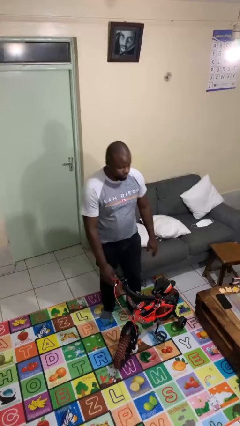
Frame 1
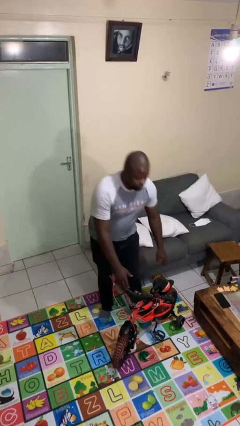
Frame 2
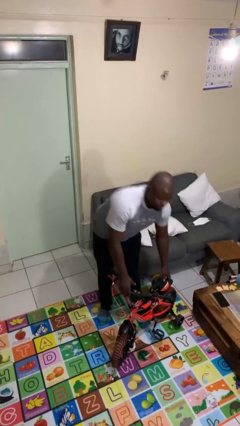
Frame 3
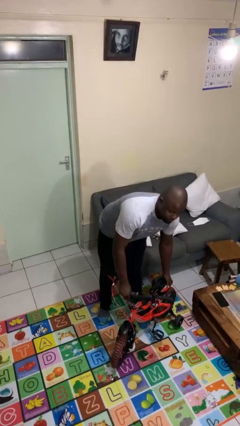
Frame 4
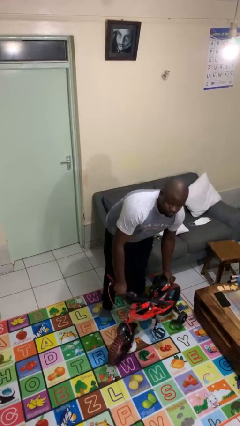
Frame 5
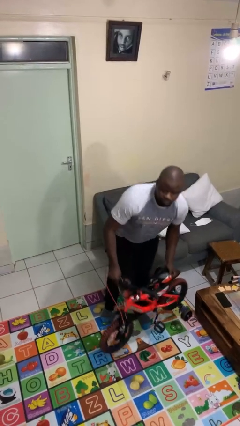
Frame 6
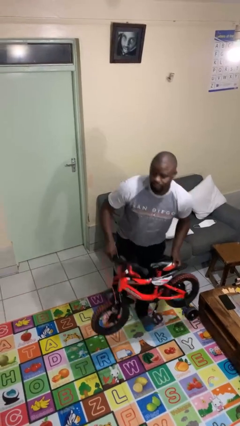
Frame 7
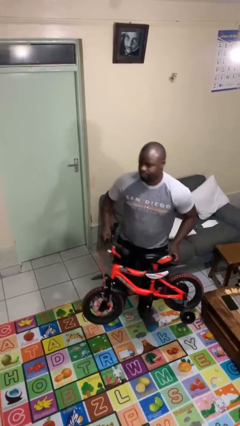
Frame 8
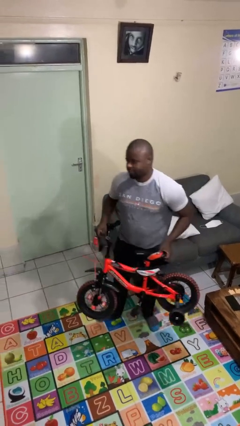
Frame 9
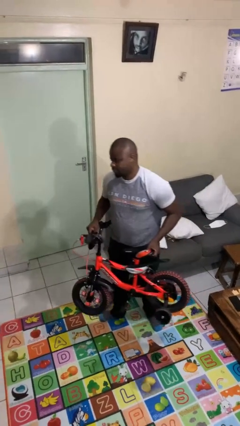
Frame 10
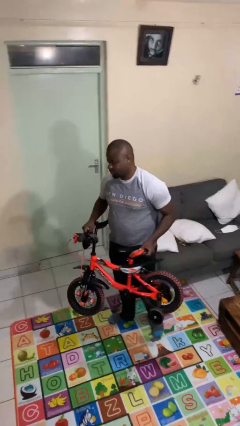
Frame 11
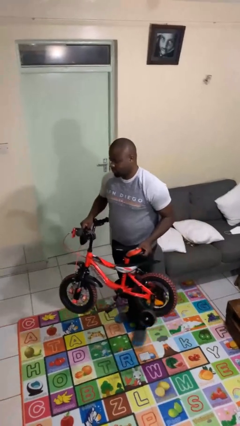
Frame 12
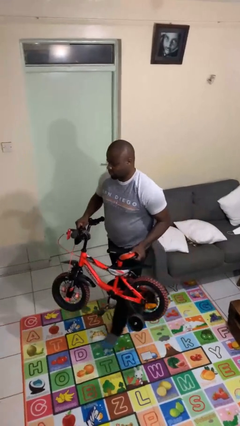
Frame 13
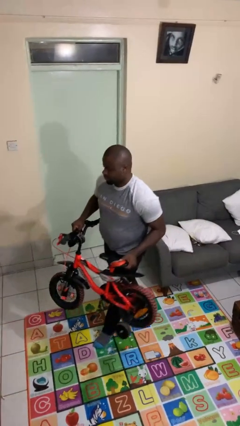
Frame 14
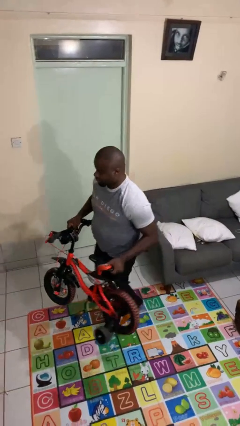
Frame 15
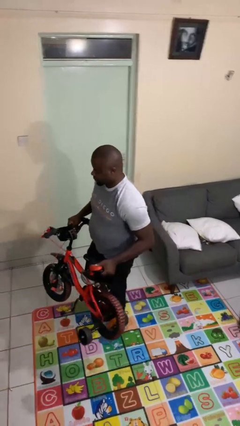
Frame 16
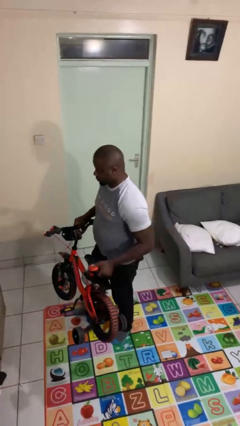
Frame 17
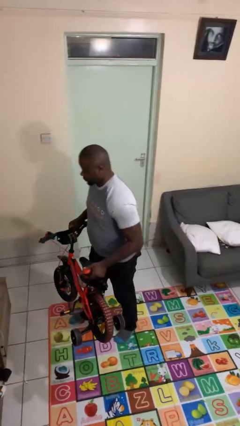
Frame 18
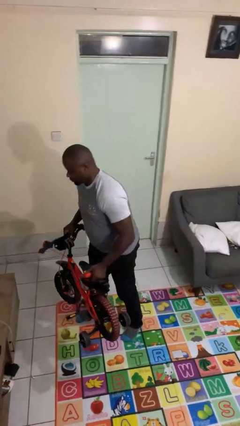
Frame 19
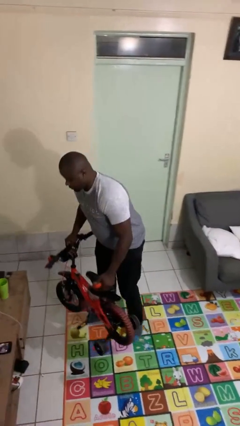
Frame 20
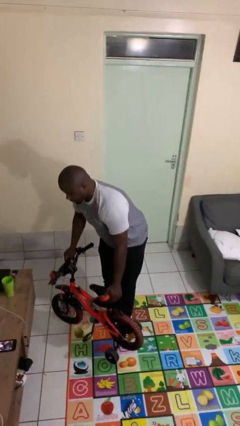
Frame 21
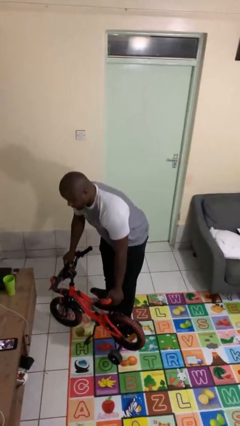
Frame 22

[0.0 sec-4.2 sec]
person carries bicycle

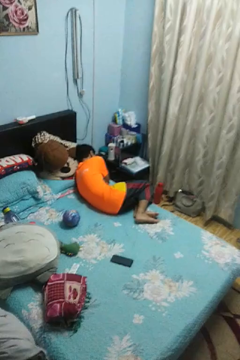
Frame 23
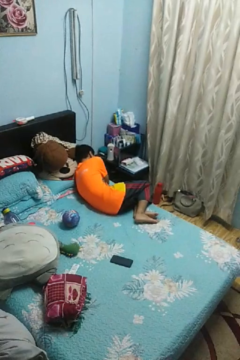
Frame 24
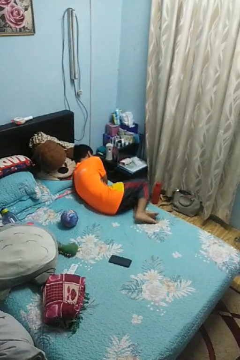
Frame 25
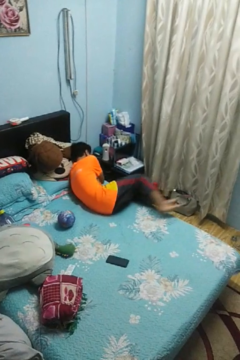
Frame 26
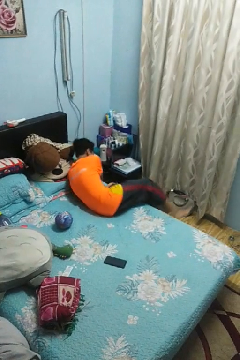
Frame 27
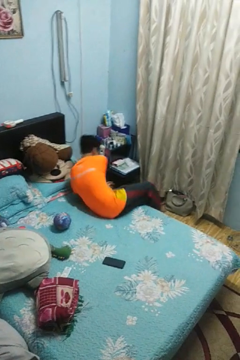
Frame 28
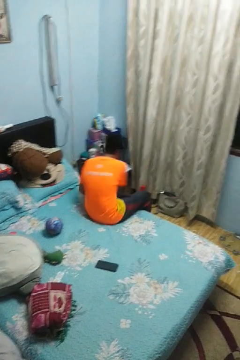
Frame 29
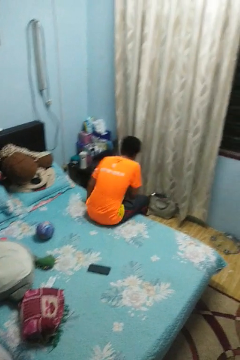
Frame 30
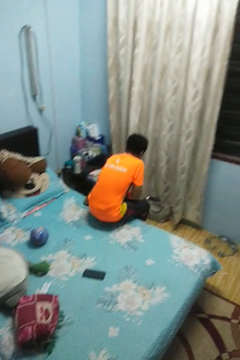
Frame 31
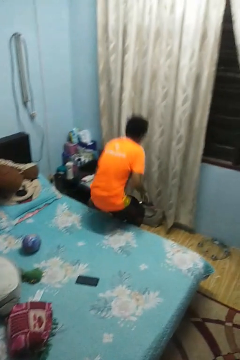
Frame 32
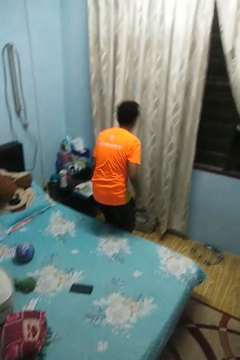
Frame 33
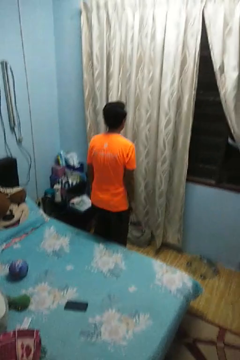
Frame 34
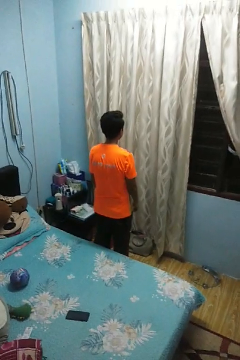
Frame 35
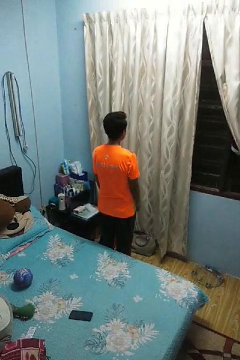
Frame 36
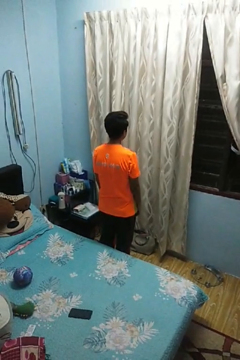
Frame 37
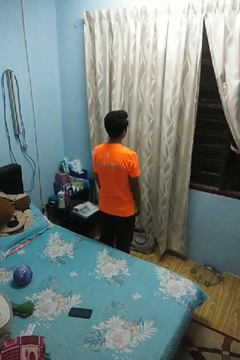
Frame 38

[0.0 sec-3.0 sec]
person stands up

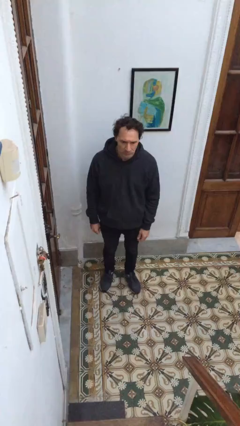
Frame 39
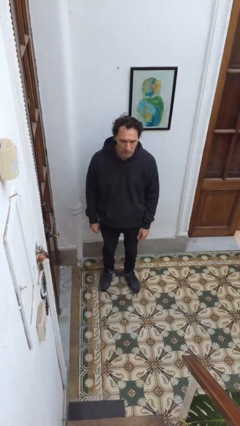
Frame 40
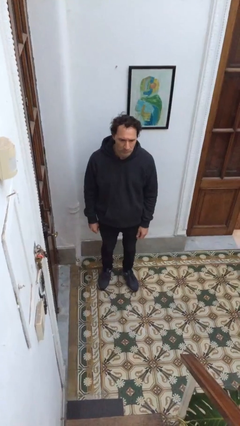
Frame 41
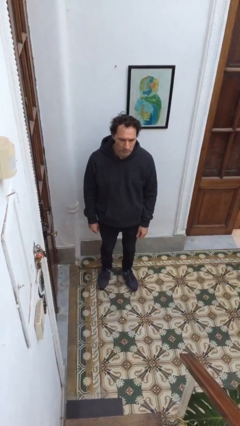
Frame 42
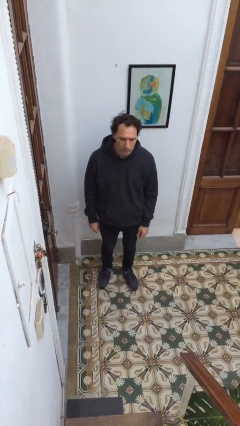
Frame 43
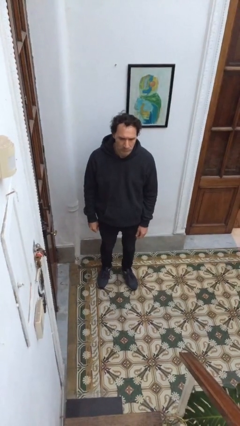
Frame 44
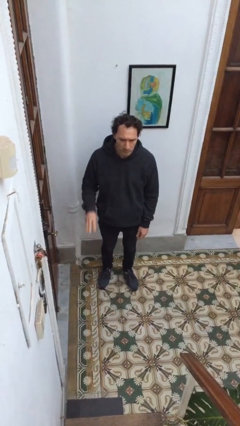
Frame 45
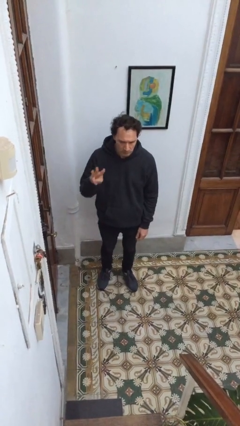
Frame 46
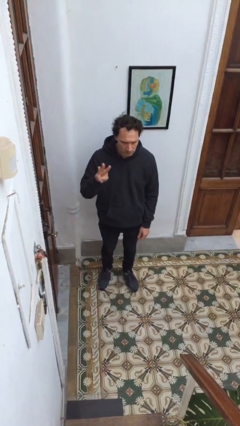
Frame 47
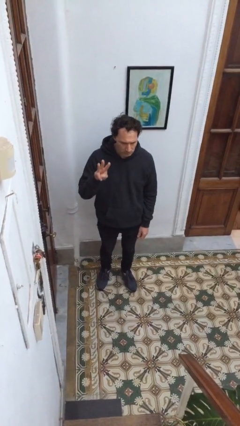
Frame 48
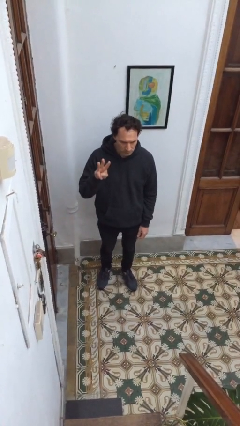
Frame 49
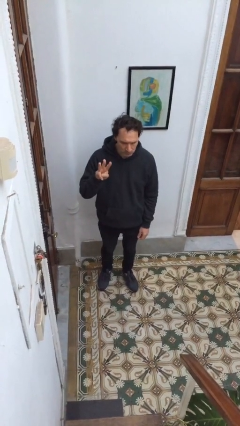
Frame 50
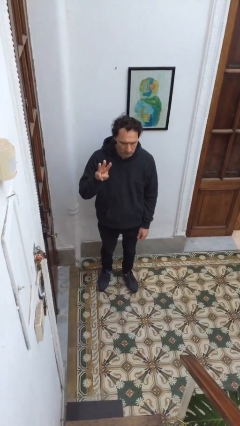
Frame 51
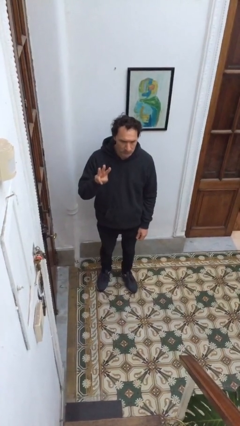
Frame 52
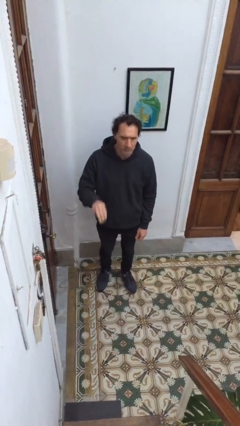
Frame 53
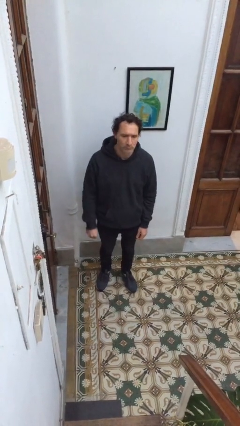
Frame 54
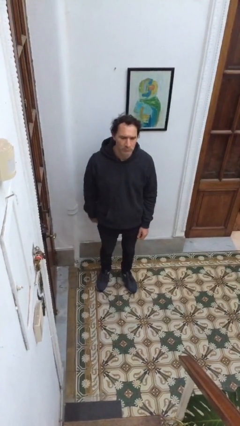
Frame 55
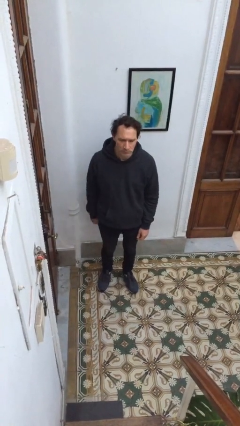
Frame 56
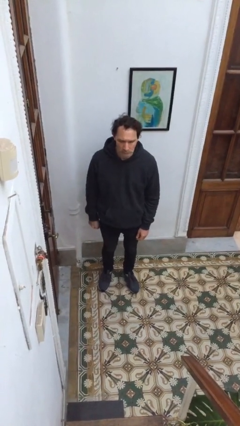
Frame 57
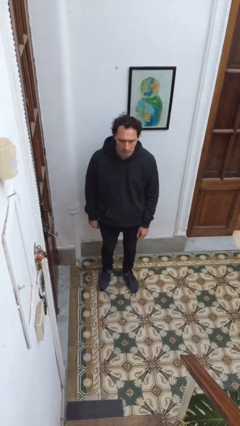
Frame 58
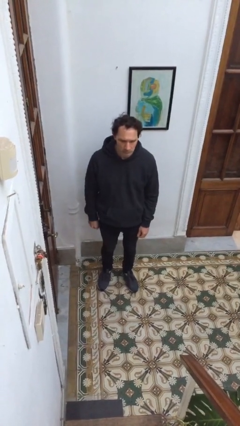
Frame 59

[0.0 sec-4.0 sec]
person gestures number three

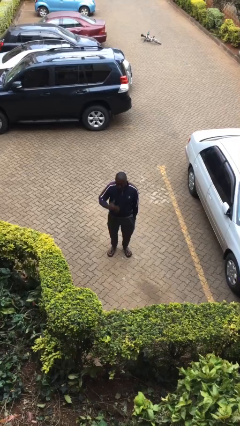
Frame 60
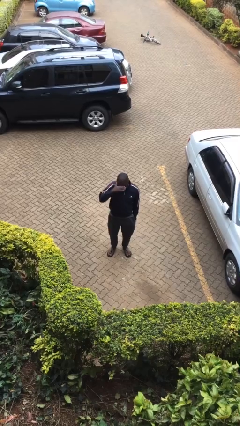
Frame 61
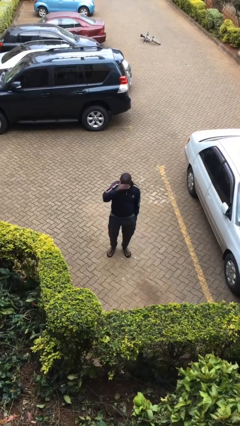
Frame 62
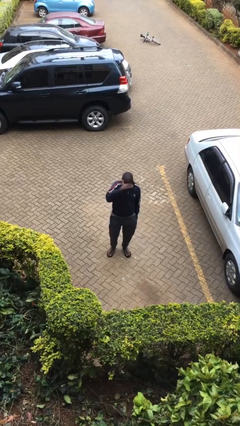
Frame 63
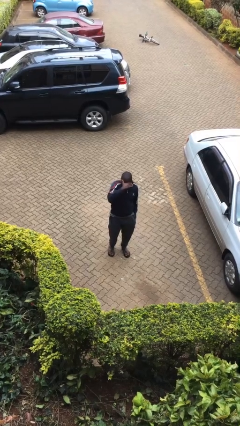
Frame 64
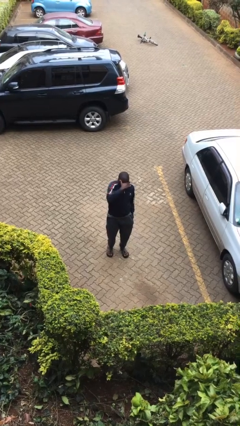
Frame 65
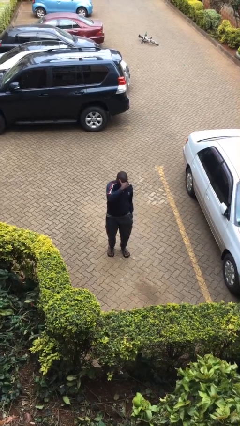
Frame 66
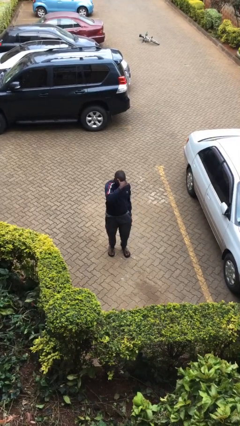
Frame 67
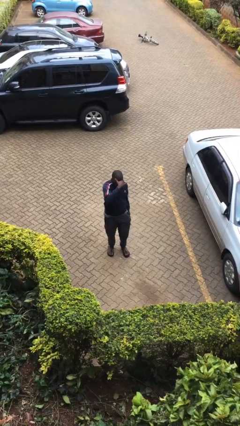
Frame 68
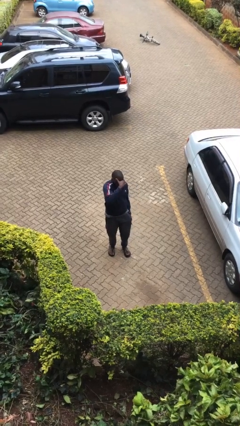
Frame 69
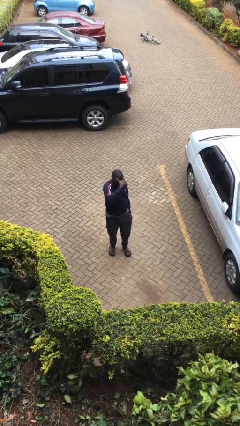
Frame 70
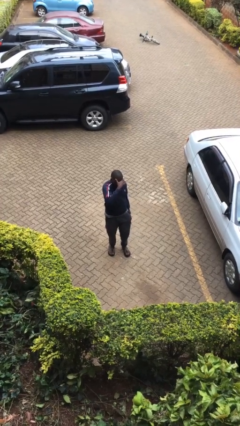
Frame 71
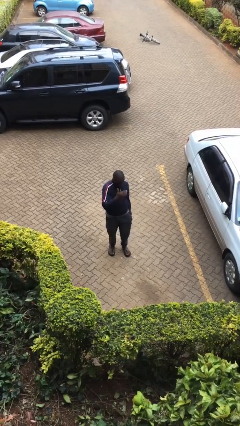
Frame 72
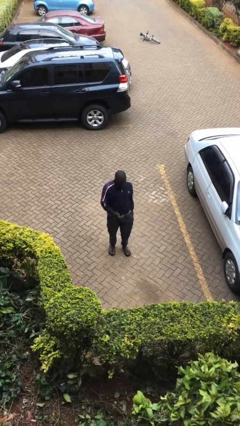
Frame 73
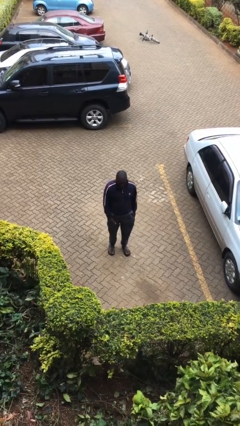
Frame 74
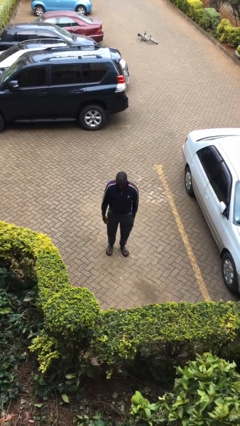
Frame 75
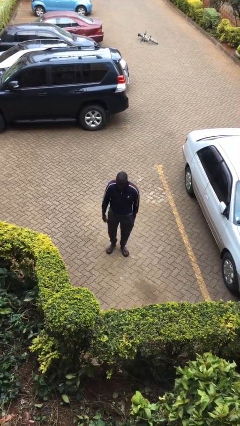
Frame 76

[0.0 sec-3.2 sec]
person shades eyes

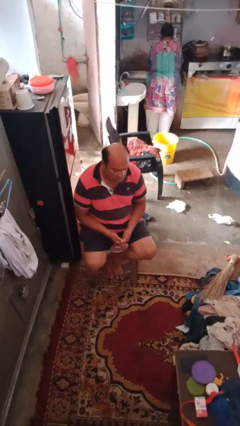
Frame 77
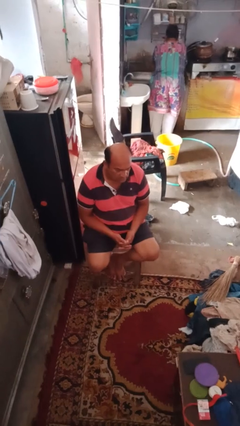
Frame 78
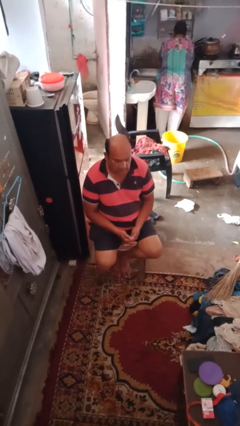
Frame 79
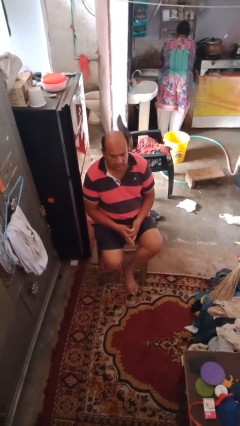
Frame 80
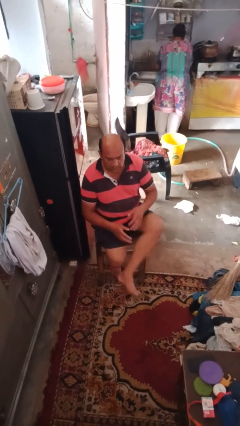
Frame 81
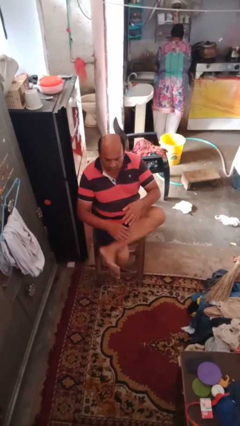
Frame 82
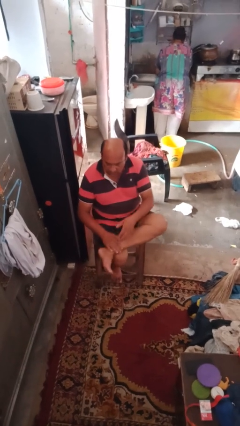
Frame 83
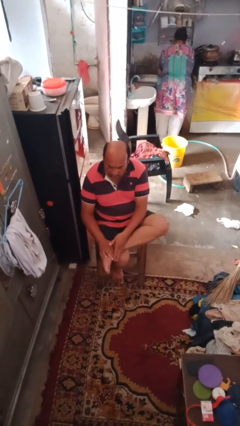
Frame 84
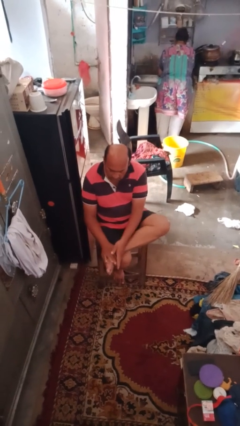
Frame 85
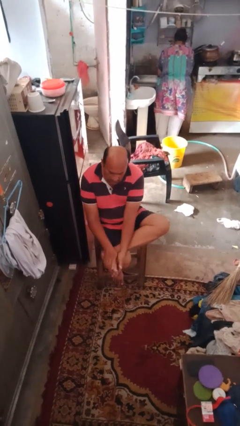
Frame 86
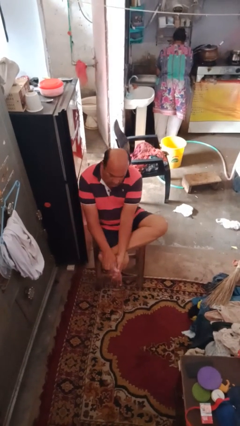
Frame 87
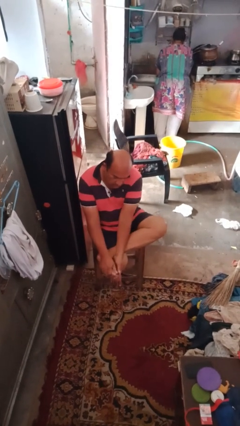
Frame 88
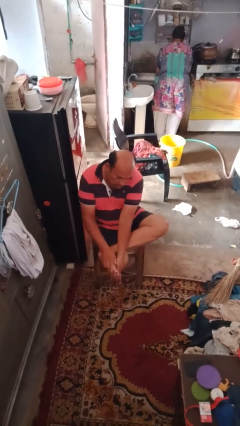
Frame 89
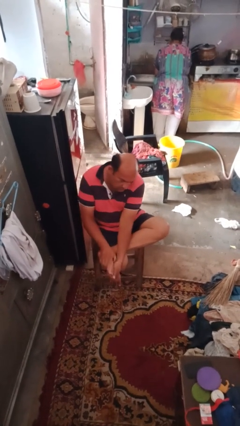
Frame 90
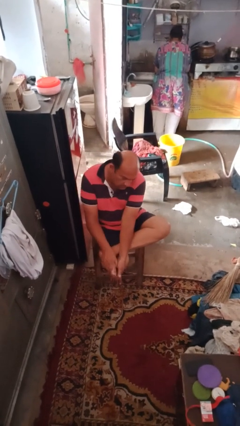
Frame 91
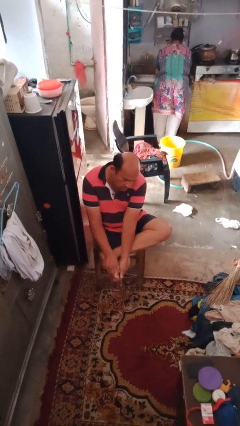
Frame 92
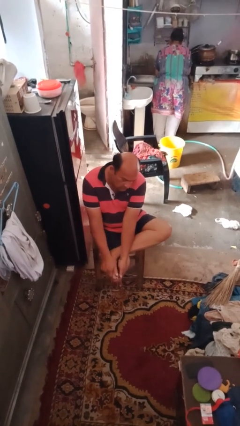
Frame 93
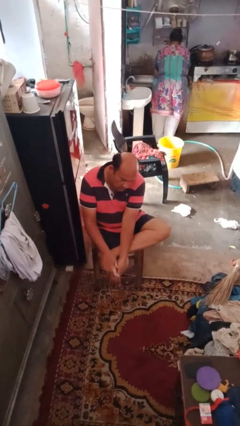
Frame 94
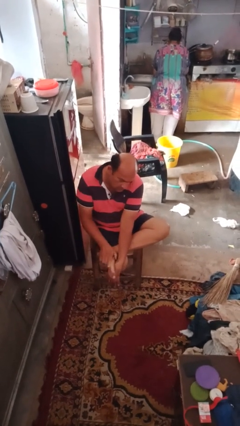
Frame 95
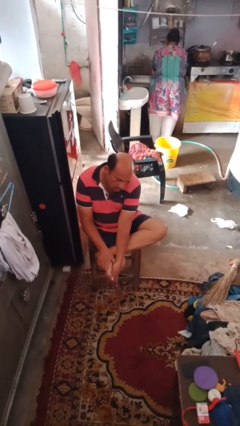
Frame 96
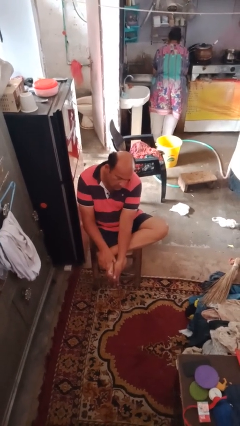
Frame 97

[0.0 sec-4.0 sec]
person rubs foot

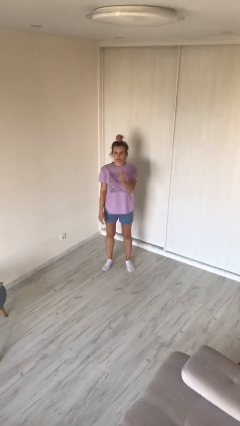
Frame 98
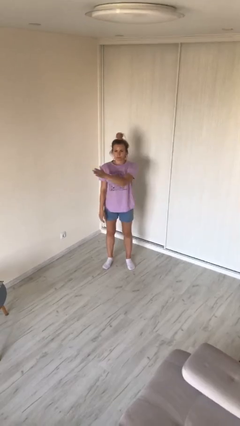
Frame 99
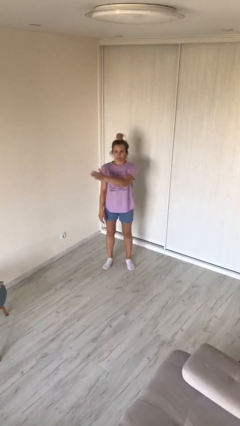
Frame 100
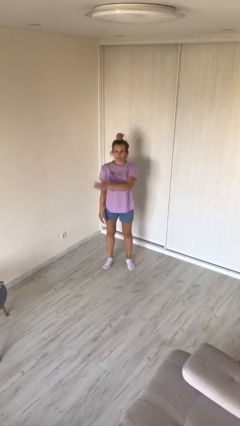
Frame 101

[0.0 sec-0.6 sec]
person gestures swipe right
